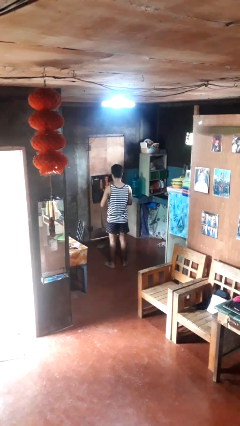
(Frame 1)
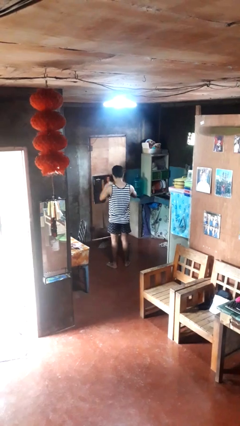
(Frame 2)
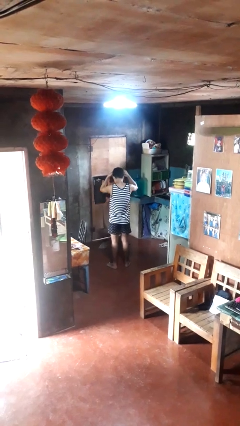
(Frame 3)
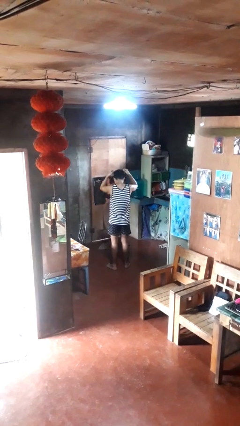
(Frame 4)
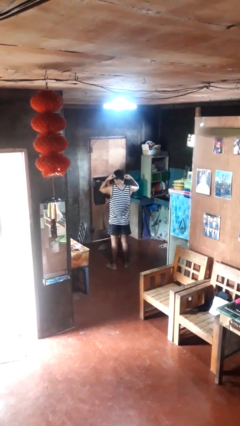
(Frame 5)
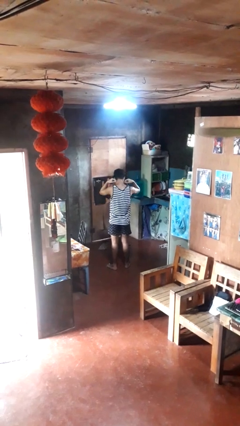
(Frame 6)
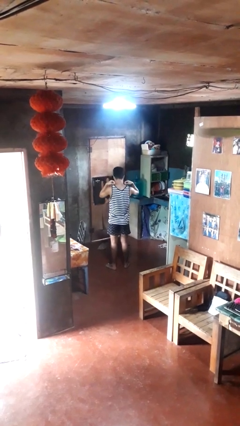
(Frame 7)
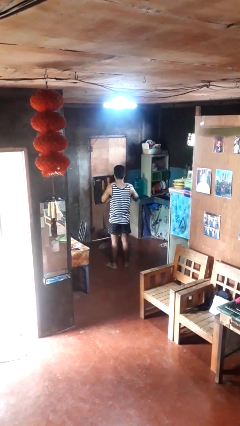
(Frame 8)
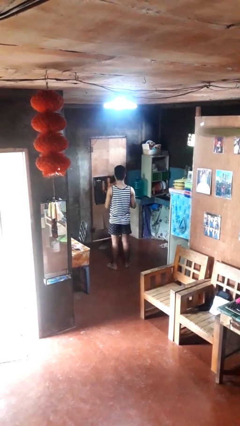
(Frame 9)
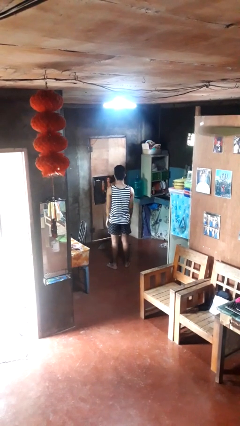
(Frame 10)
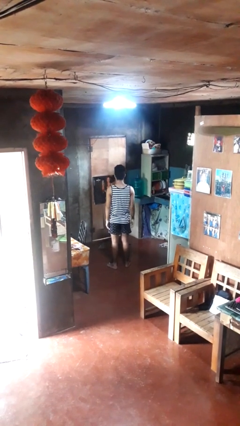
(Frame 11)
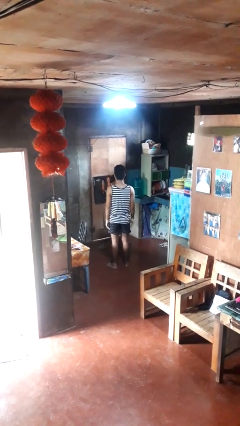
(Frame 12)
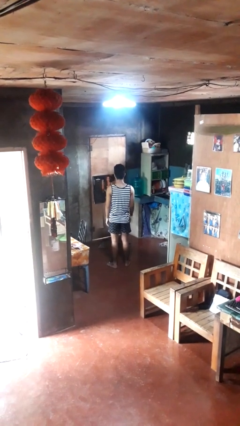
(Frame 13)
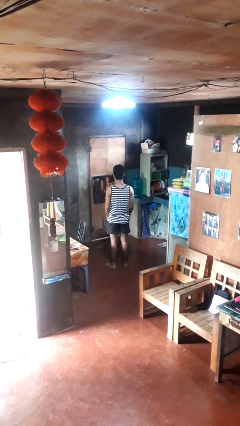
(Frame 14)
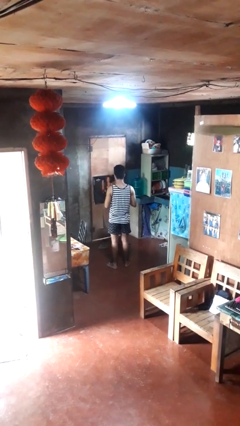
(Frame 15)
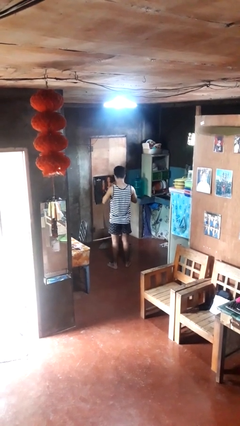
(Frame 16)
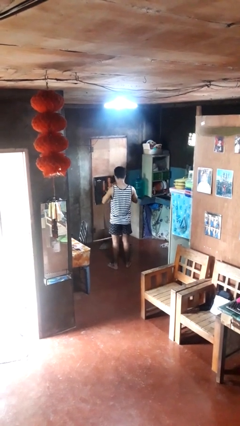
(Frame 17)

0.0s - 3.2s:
person puts on necklace

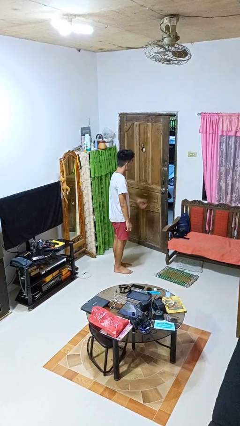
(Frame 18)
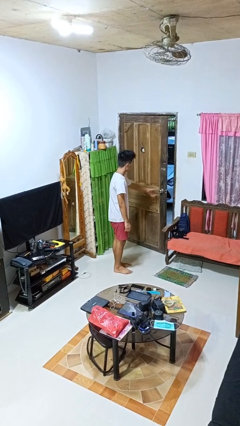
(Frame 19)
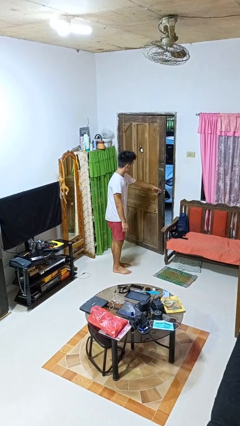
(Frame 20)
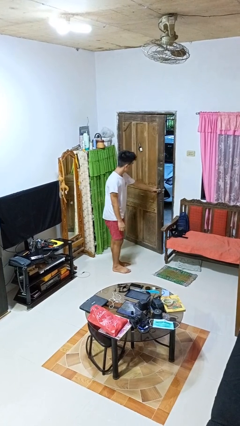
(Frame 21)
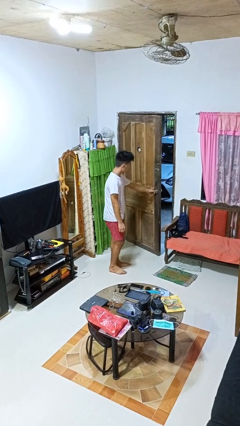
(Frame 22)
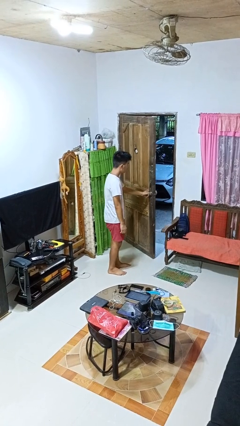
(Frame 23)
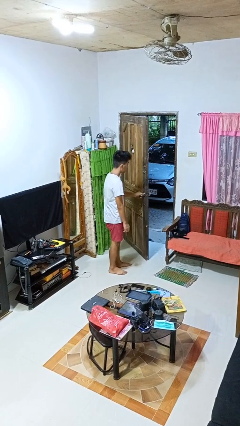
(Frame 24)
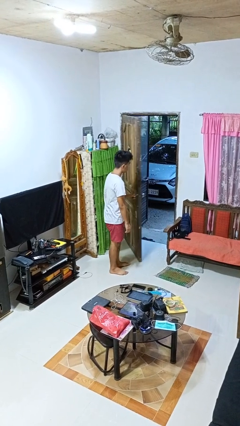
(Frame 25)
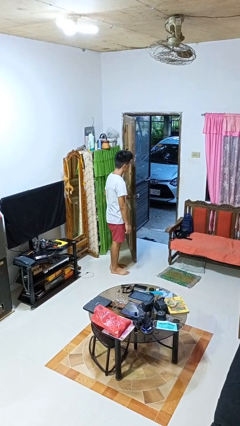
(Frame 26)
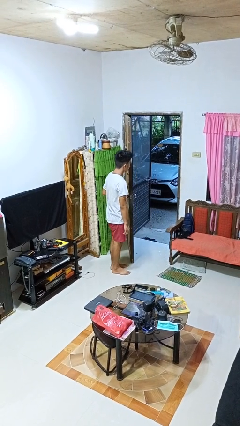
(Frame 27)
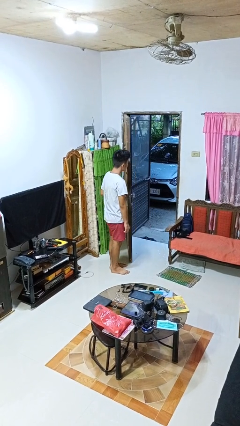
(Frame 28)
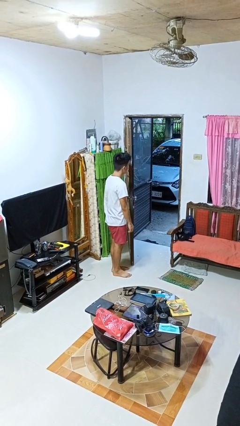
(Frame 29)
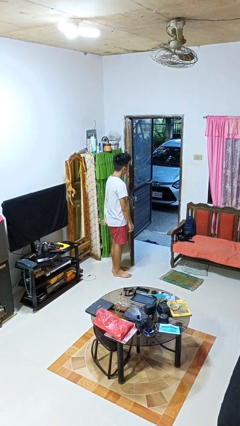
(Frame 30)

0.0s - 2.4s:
person opens facility door

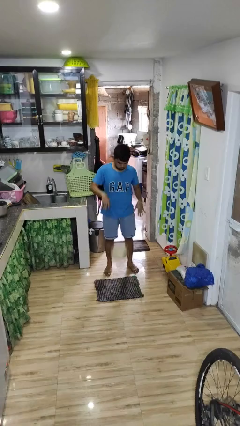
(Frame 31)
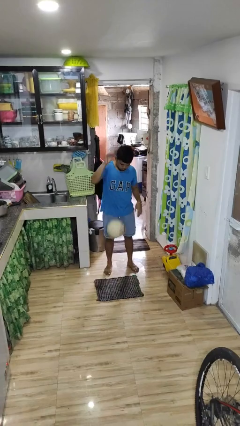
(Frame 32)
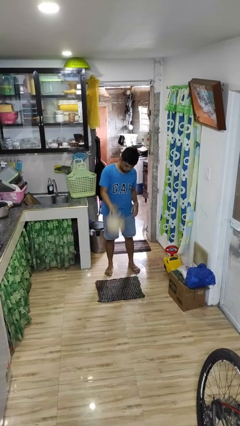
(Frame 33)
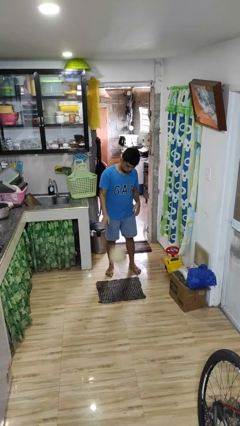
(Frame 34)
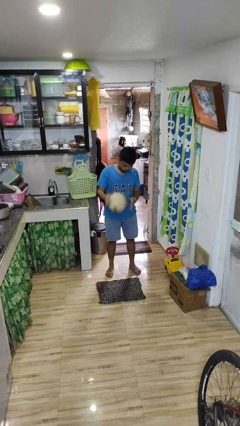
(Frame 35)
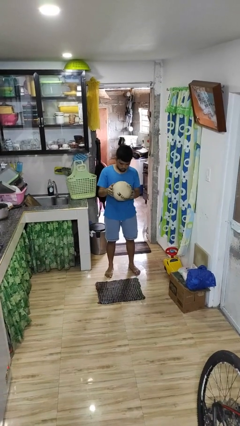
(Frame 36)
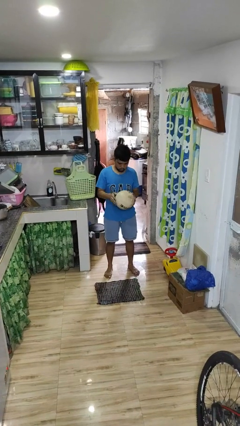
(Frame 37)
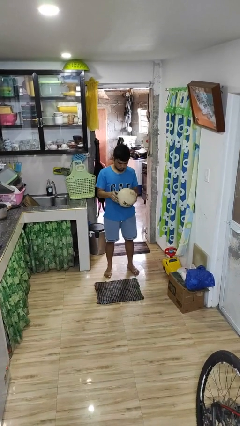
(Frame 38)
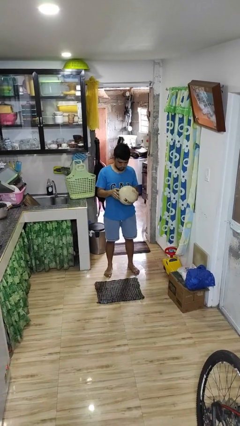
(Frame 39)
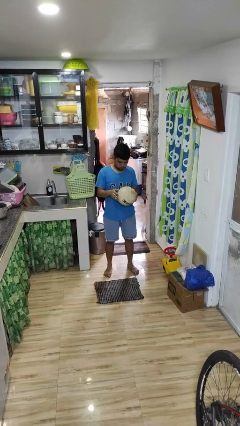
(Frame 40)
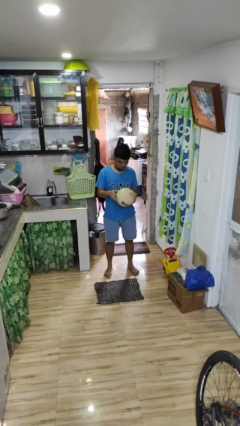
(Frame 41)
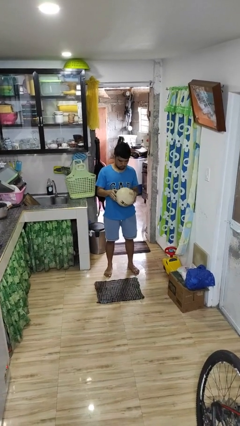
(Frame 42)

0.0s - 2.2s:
person bounces ball on floor

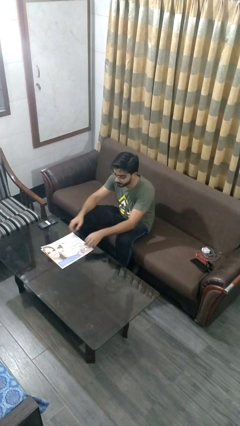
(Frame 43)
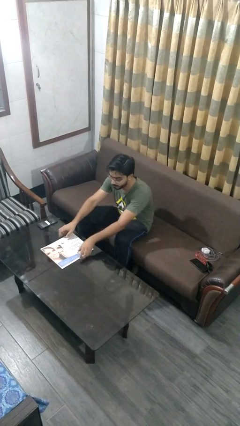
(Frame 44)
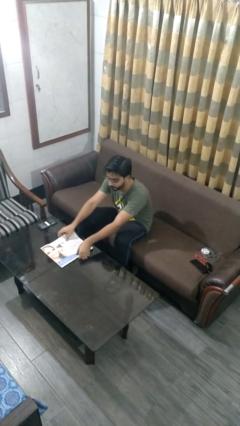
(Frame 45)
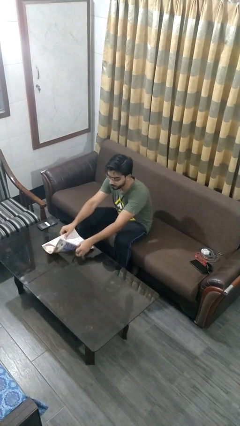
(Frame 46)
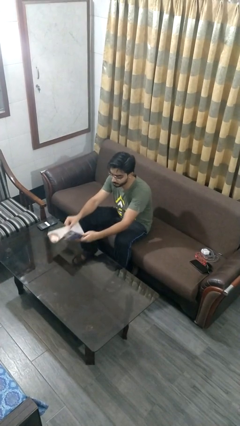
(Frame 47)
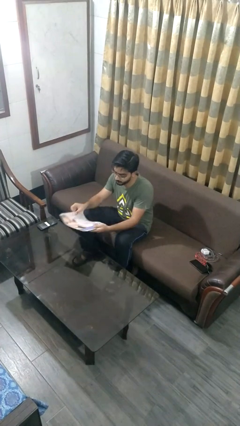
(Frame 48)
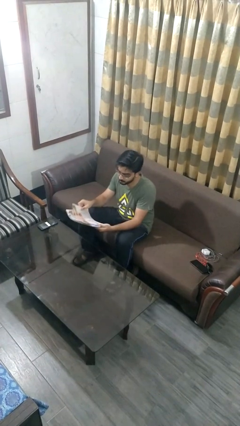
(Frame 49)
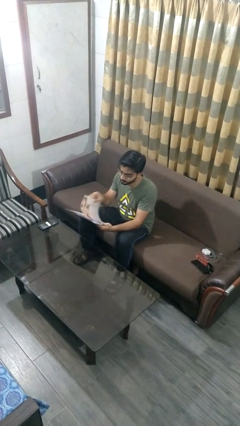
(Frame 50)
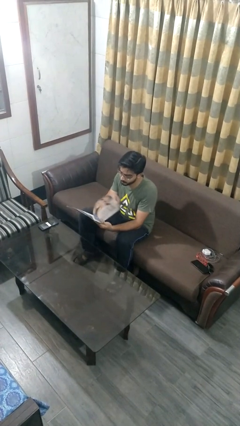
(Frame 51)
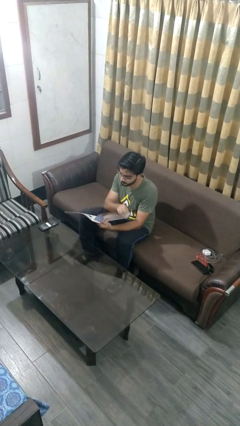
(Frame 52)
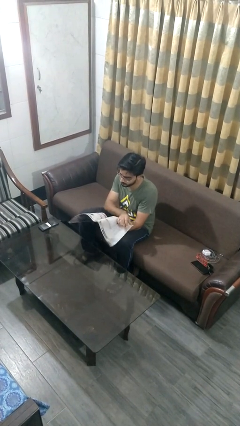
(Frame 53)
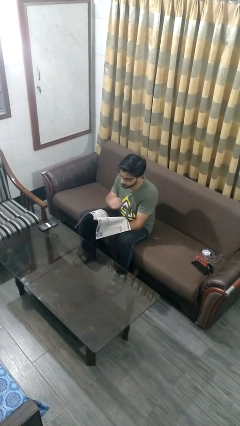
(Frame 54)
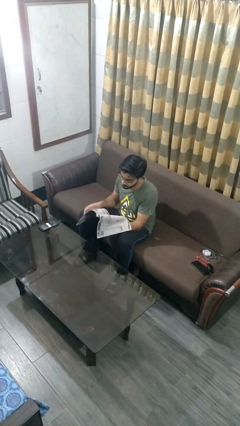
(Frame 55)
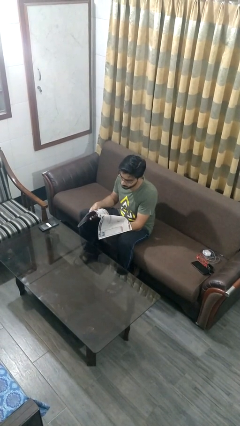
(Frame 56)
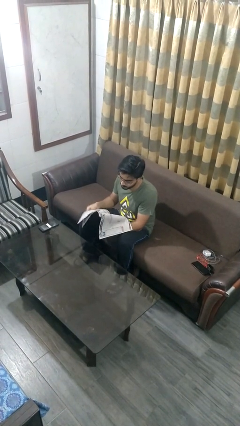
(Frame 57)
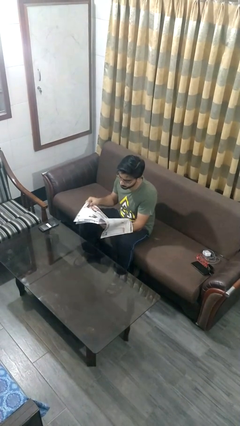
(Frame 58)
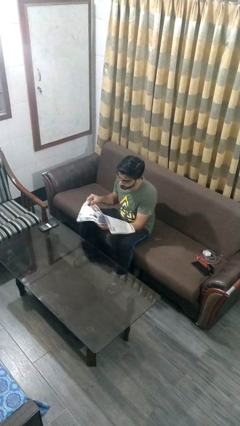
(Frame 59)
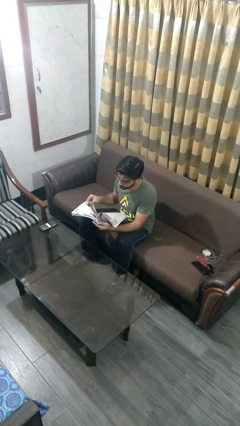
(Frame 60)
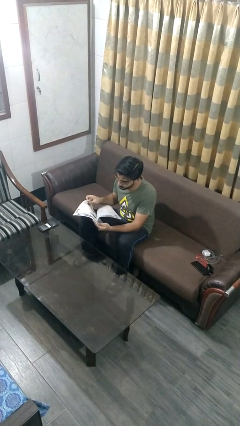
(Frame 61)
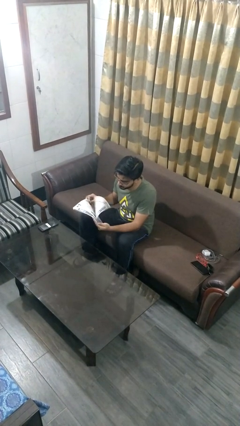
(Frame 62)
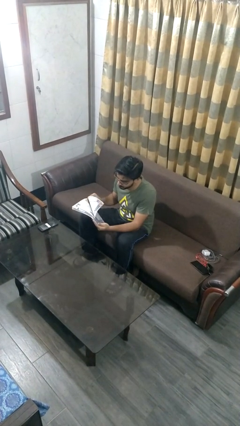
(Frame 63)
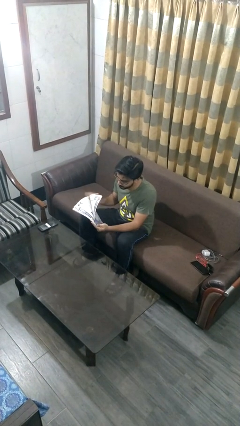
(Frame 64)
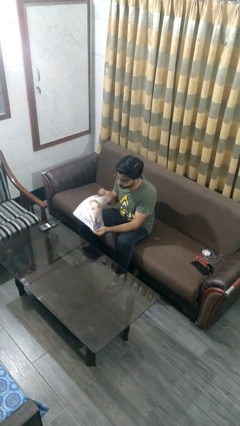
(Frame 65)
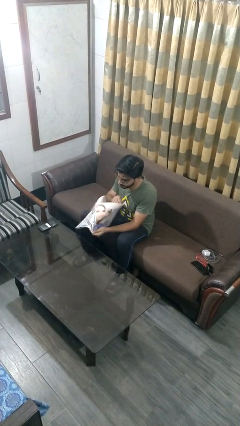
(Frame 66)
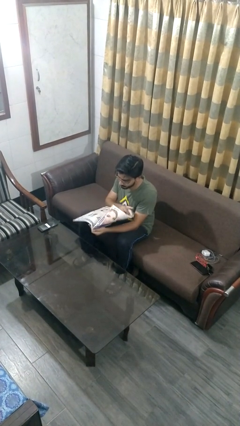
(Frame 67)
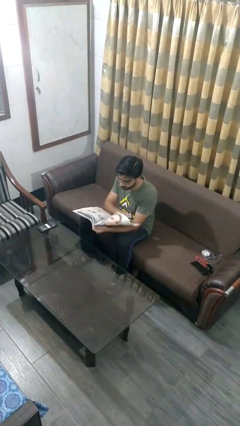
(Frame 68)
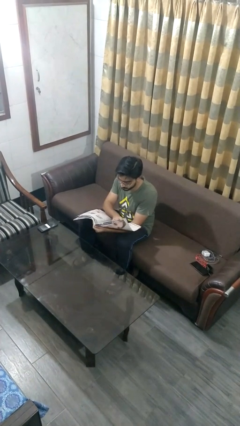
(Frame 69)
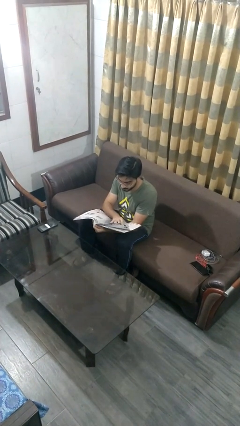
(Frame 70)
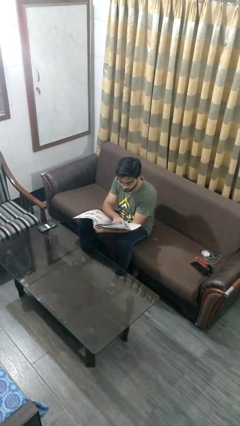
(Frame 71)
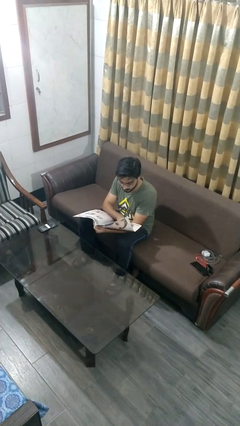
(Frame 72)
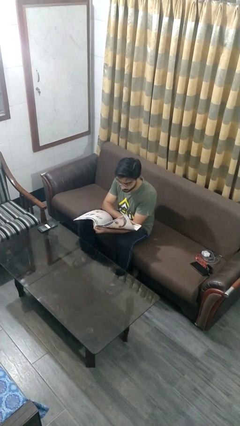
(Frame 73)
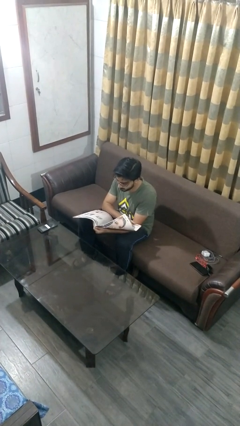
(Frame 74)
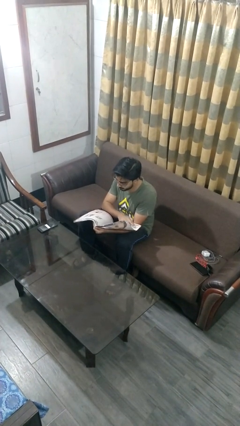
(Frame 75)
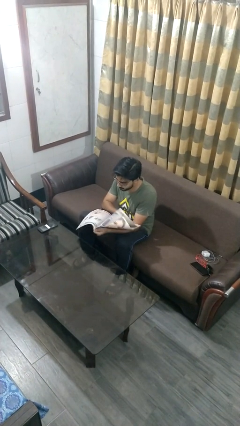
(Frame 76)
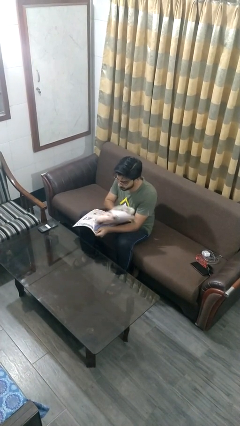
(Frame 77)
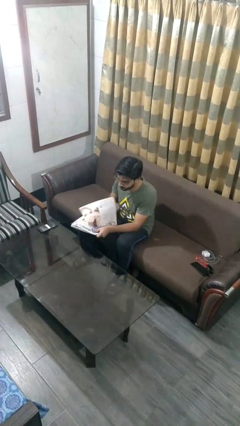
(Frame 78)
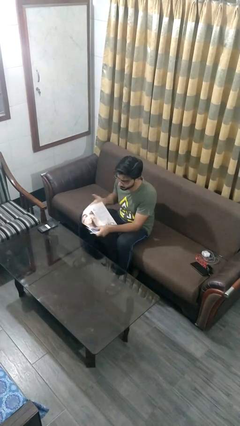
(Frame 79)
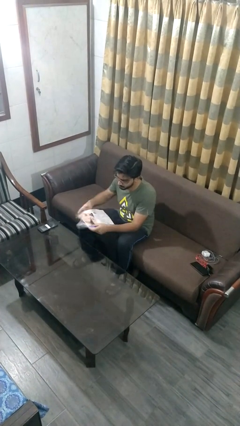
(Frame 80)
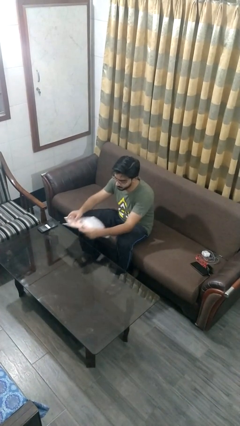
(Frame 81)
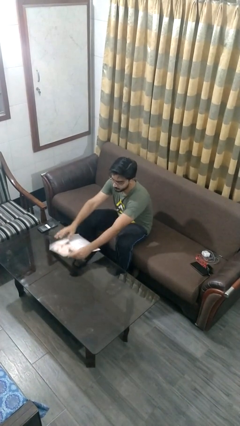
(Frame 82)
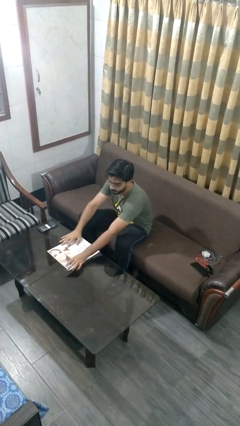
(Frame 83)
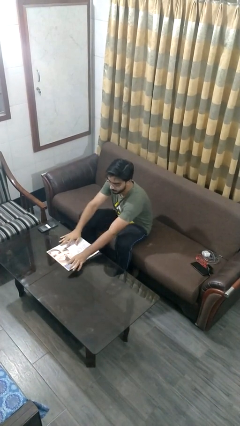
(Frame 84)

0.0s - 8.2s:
person reads magazine

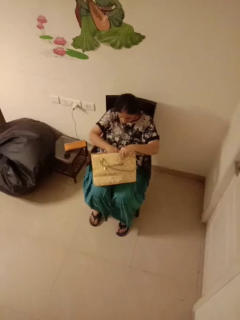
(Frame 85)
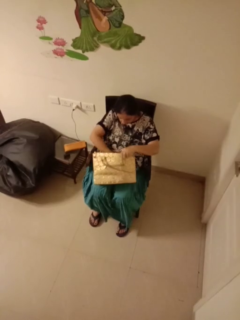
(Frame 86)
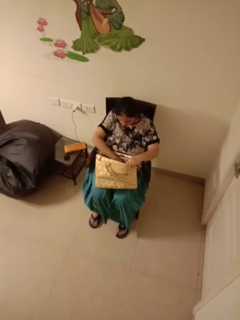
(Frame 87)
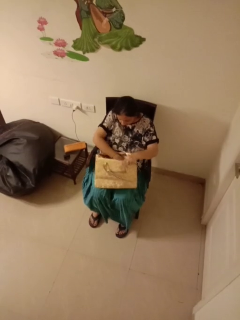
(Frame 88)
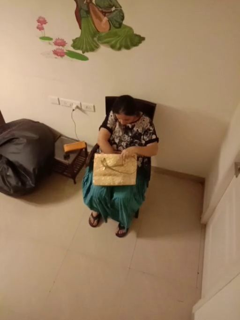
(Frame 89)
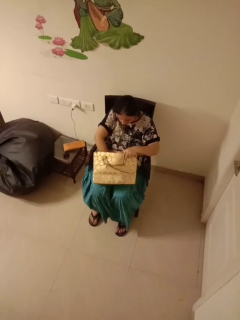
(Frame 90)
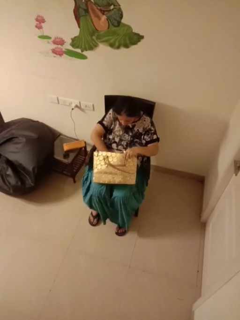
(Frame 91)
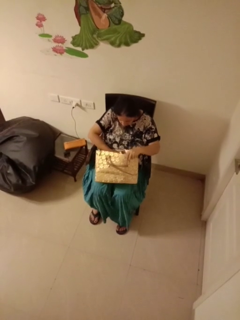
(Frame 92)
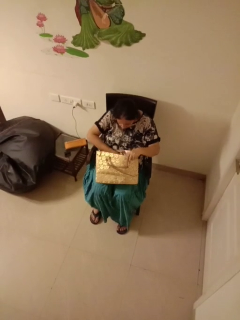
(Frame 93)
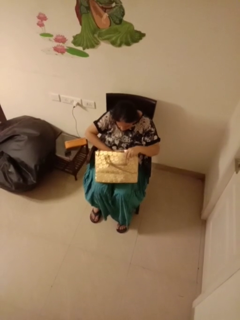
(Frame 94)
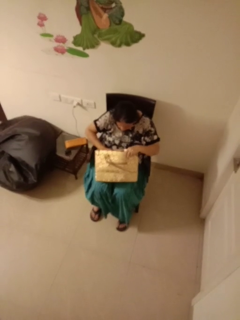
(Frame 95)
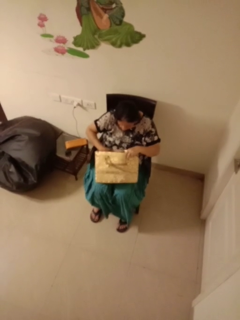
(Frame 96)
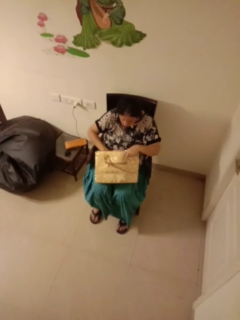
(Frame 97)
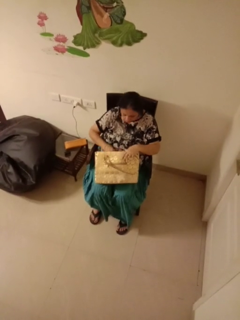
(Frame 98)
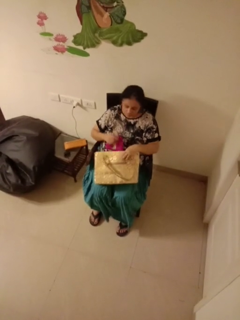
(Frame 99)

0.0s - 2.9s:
person searches in purse
